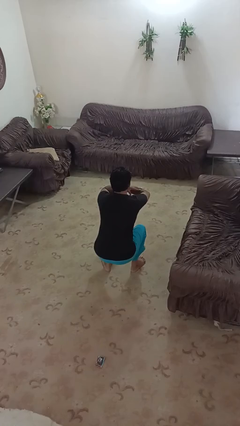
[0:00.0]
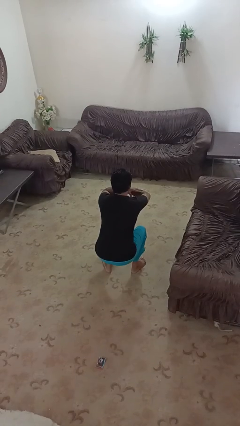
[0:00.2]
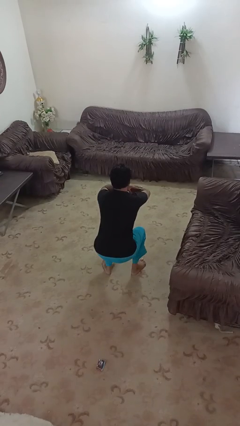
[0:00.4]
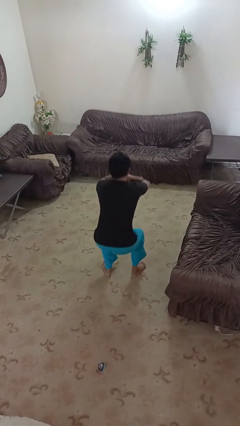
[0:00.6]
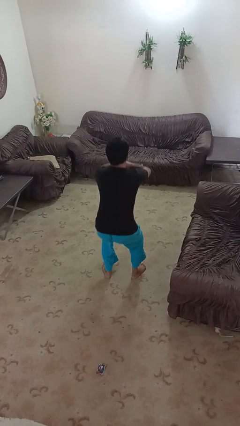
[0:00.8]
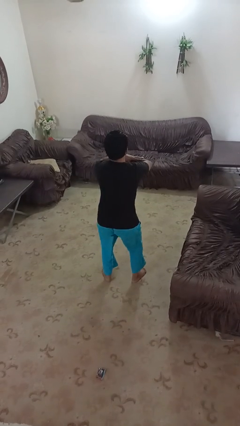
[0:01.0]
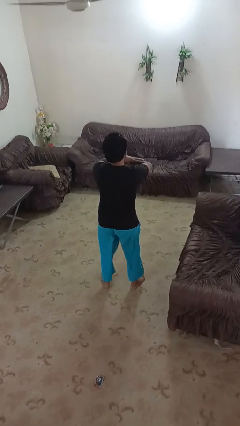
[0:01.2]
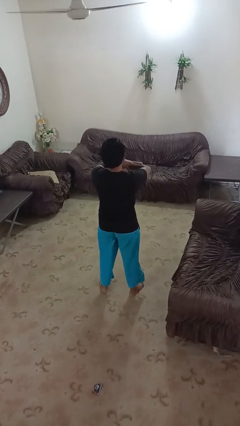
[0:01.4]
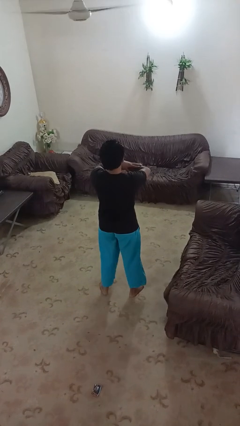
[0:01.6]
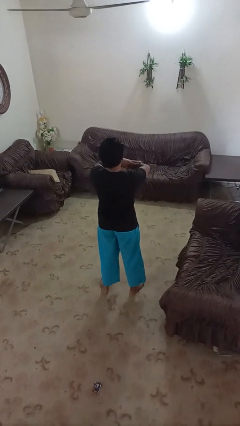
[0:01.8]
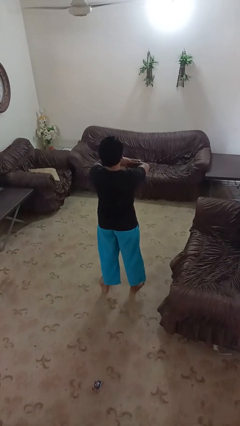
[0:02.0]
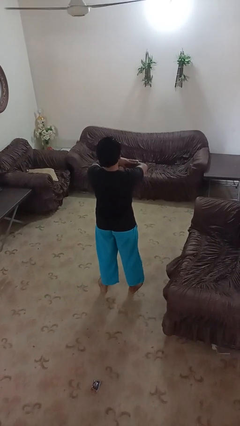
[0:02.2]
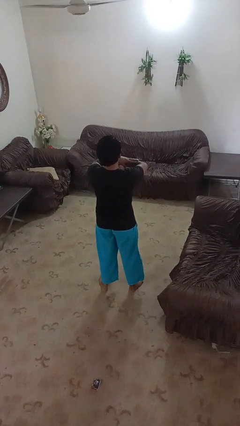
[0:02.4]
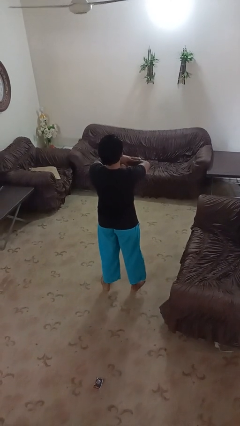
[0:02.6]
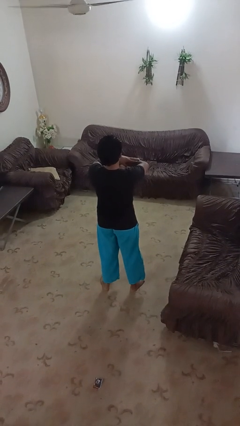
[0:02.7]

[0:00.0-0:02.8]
person stands up

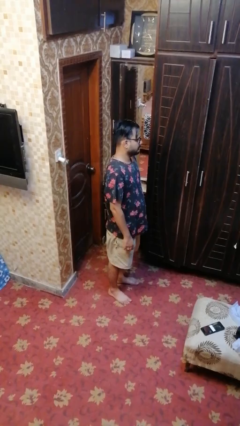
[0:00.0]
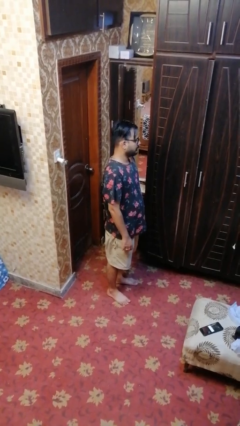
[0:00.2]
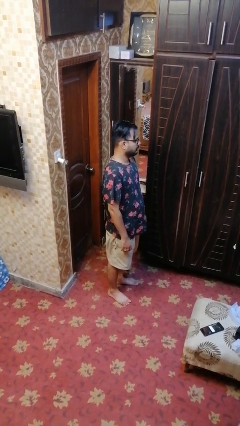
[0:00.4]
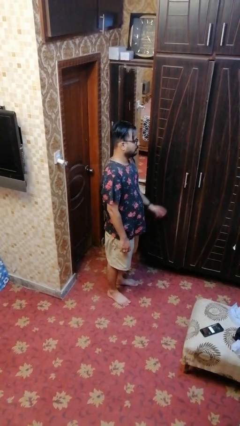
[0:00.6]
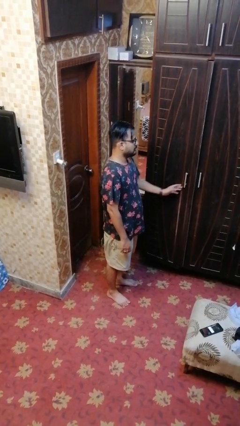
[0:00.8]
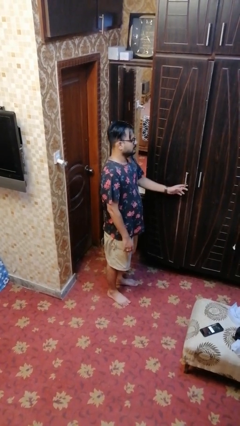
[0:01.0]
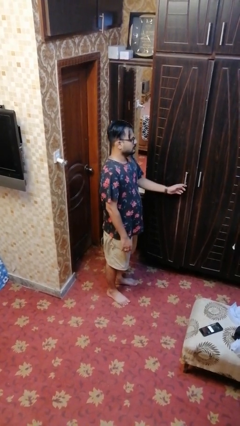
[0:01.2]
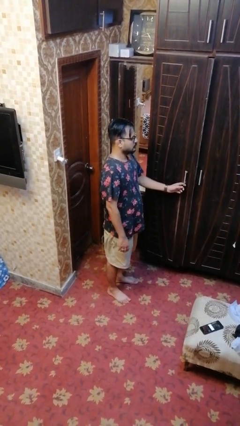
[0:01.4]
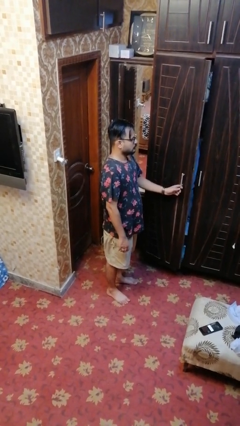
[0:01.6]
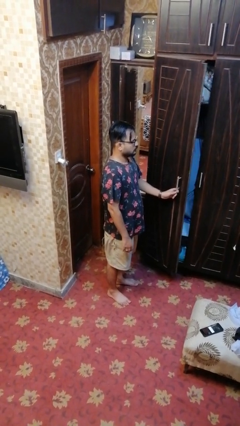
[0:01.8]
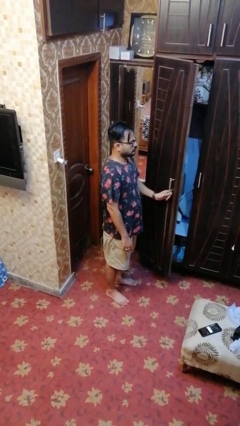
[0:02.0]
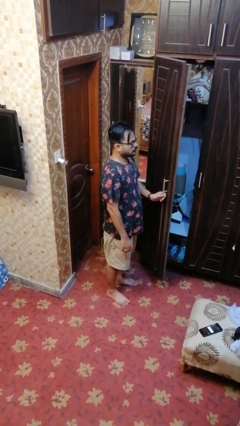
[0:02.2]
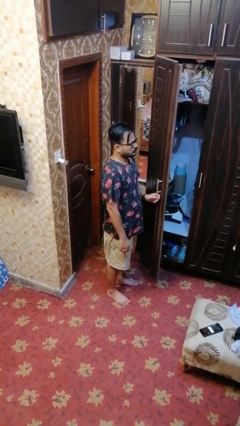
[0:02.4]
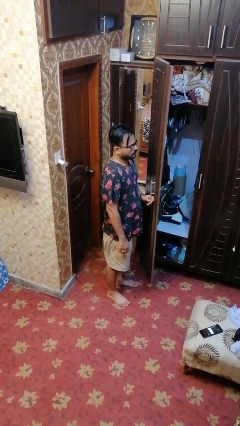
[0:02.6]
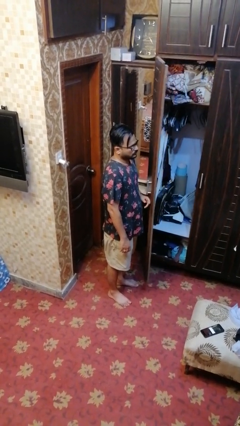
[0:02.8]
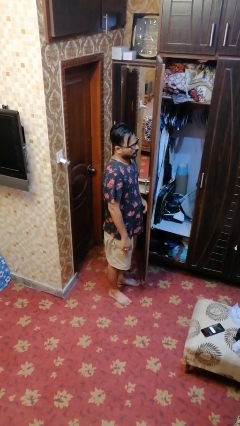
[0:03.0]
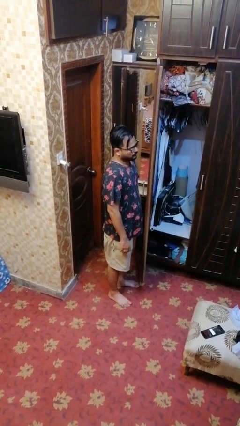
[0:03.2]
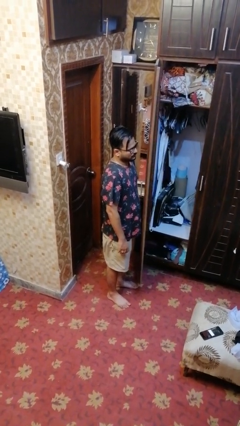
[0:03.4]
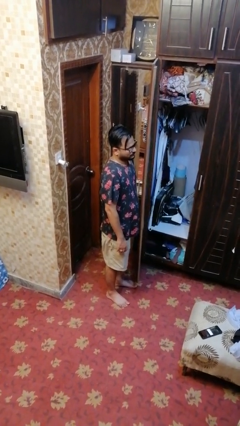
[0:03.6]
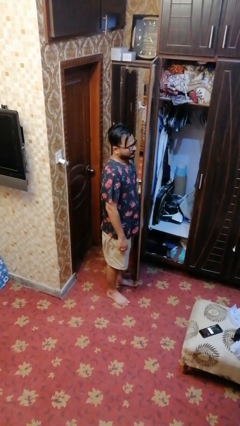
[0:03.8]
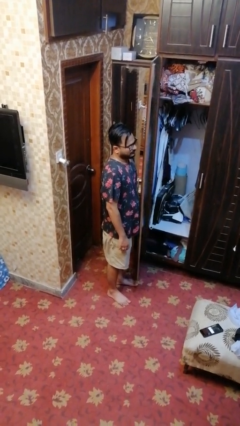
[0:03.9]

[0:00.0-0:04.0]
person opens closet door

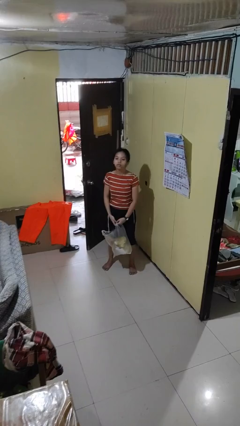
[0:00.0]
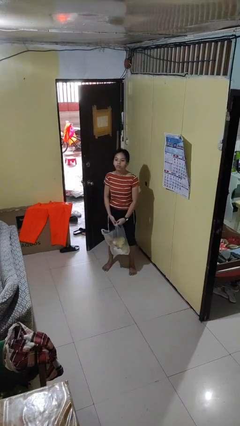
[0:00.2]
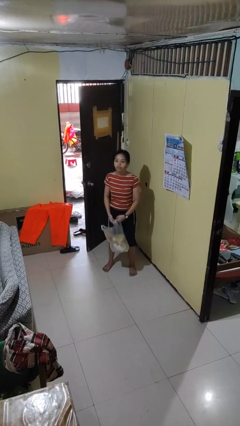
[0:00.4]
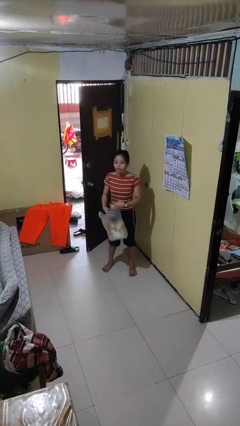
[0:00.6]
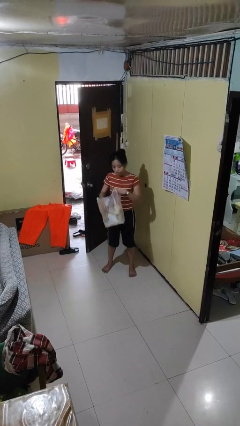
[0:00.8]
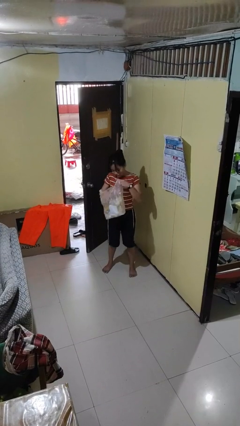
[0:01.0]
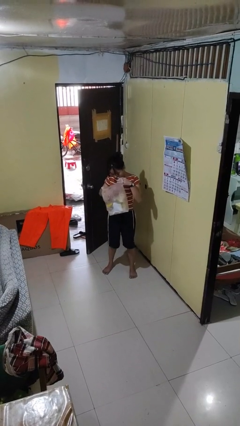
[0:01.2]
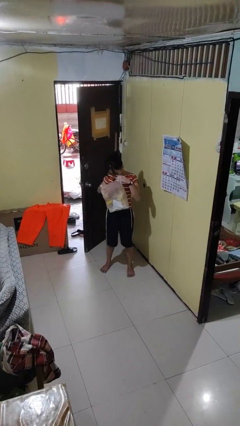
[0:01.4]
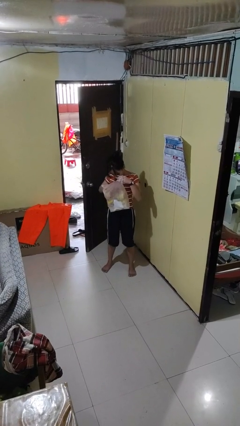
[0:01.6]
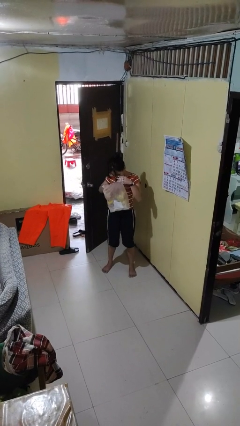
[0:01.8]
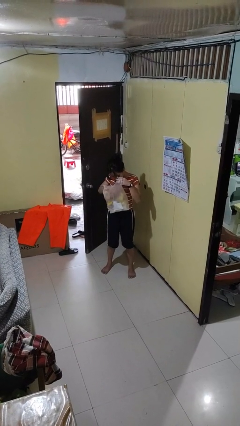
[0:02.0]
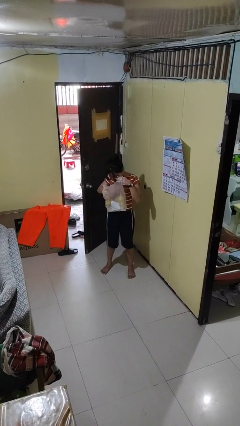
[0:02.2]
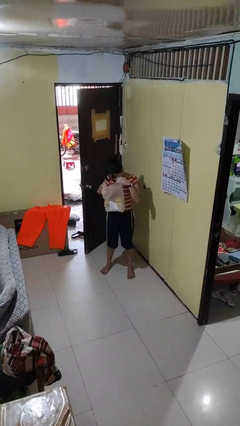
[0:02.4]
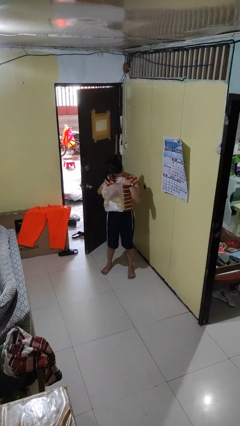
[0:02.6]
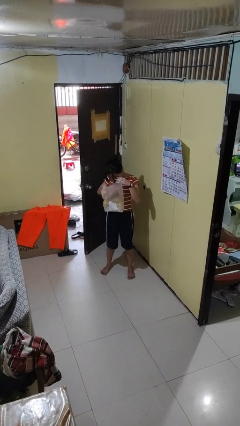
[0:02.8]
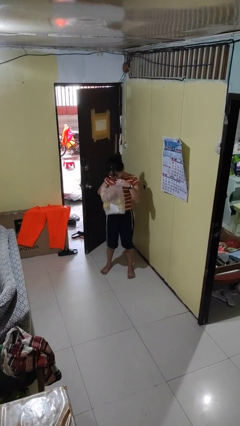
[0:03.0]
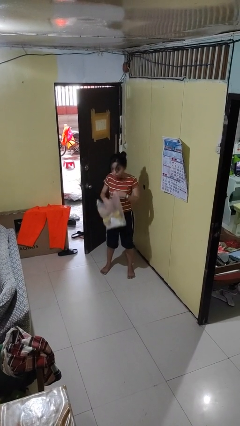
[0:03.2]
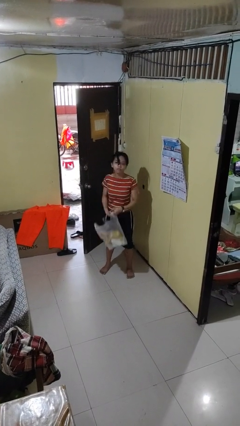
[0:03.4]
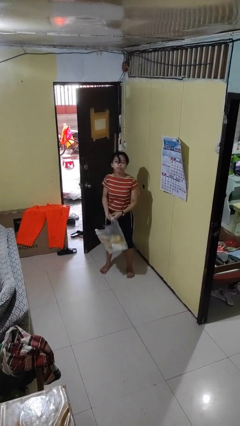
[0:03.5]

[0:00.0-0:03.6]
person searches in bag

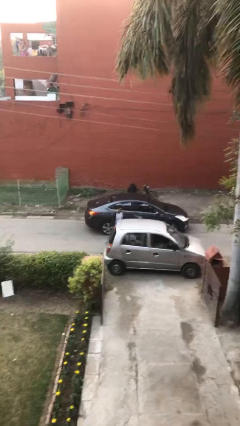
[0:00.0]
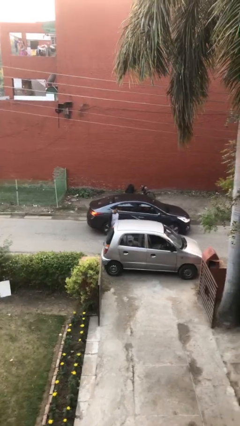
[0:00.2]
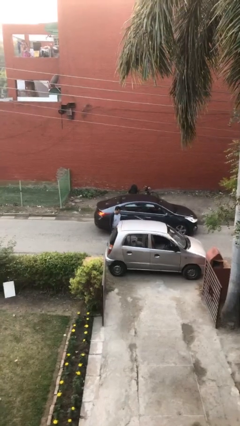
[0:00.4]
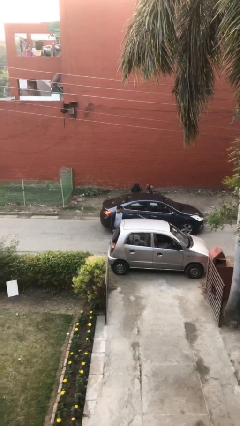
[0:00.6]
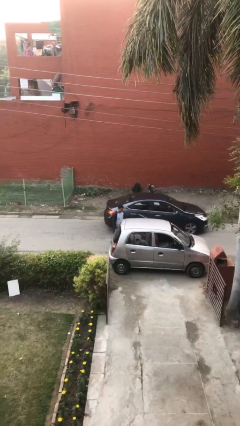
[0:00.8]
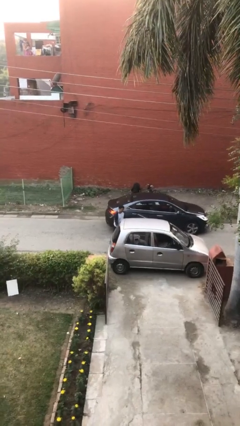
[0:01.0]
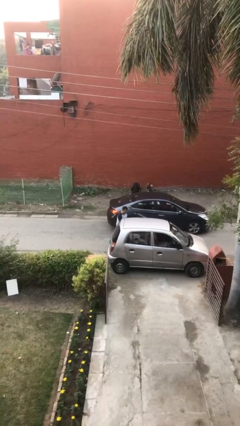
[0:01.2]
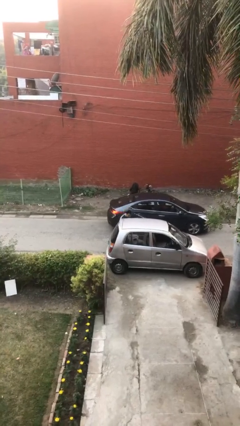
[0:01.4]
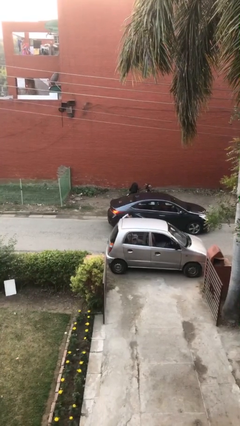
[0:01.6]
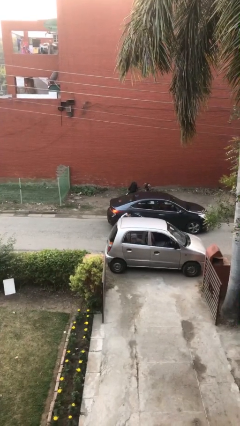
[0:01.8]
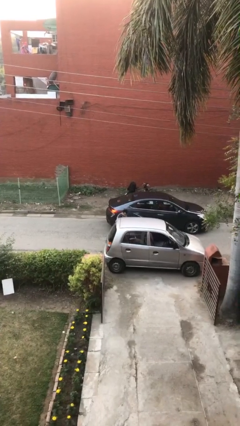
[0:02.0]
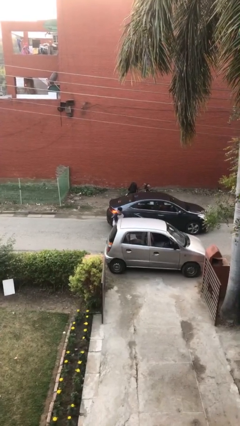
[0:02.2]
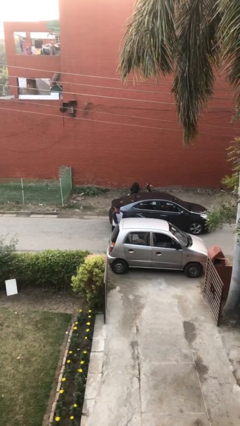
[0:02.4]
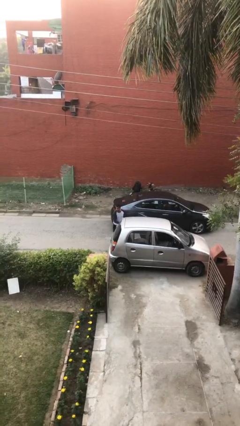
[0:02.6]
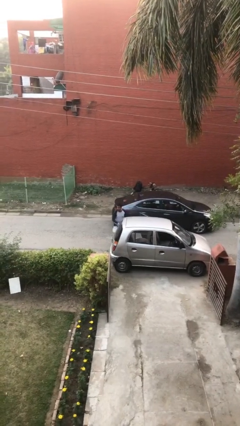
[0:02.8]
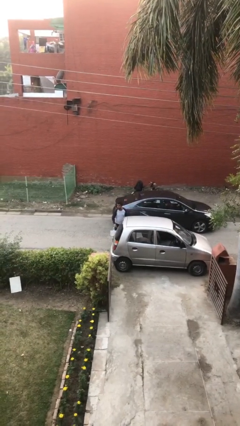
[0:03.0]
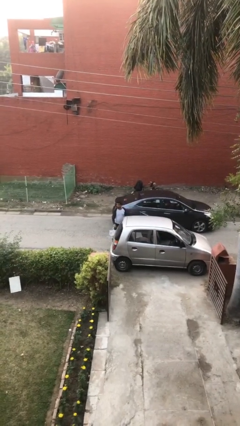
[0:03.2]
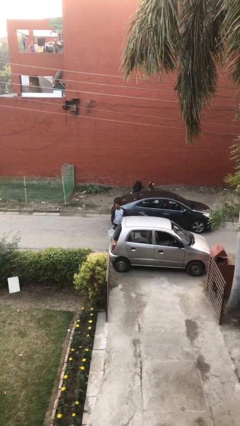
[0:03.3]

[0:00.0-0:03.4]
person unloads car

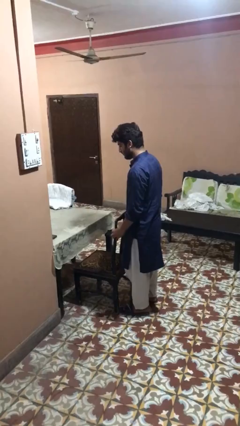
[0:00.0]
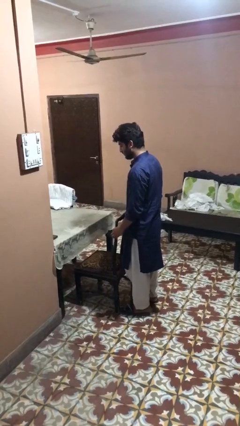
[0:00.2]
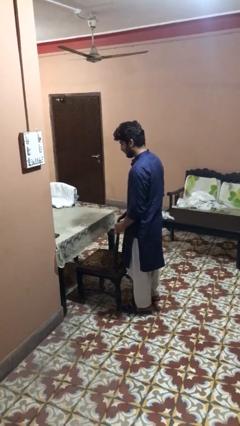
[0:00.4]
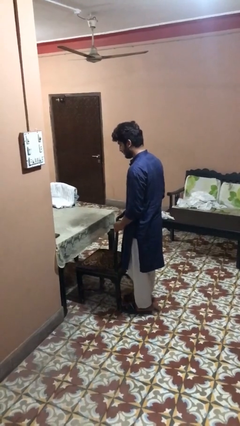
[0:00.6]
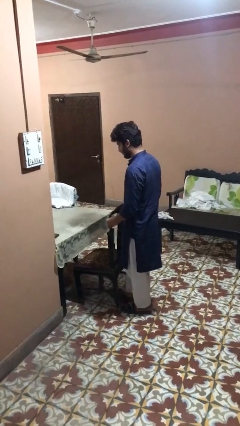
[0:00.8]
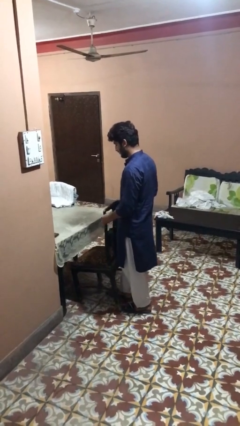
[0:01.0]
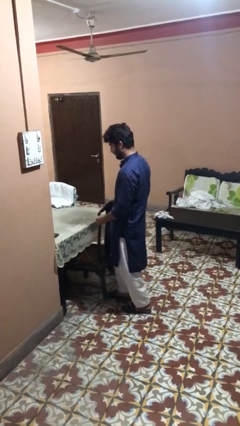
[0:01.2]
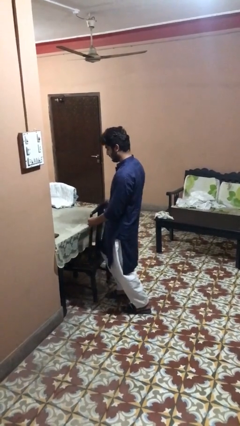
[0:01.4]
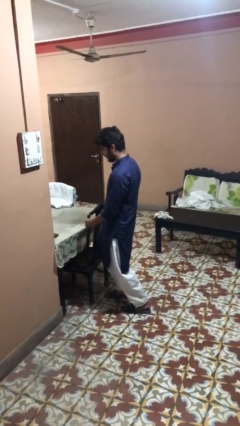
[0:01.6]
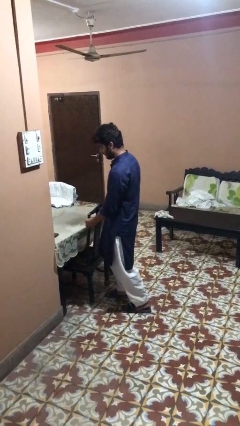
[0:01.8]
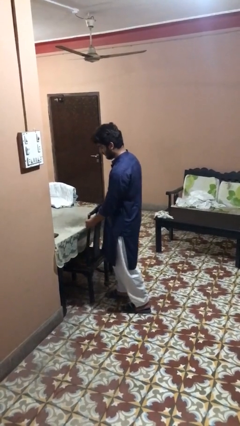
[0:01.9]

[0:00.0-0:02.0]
person pushes in chair

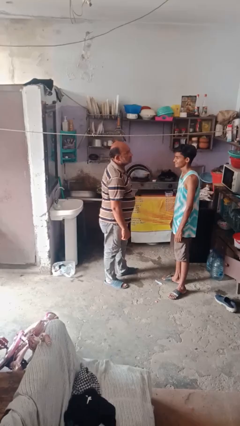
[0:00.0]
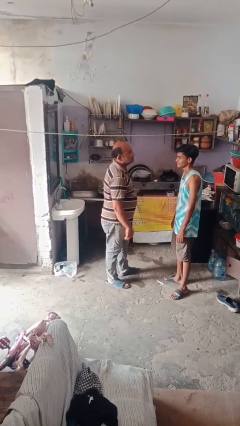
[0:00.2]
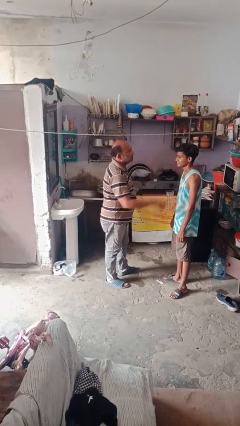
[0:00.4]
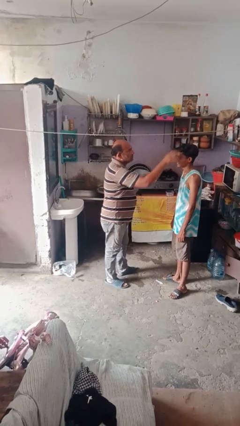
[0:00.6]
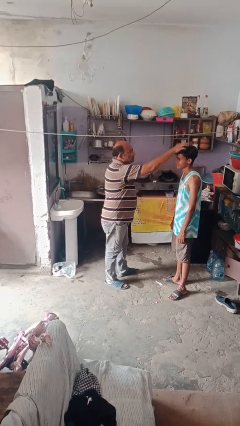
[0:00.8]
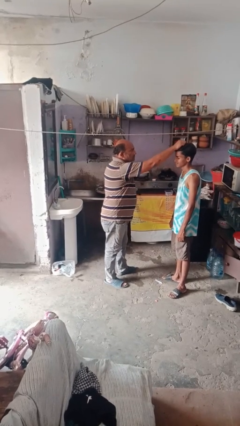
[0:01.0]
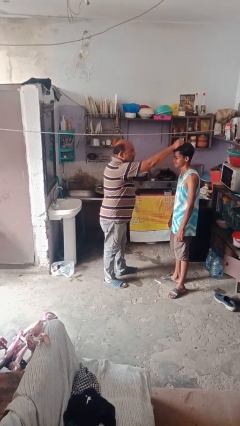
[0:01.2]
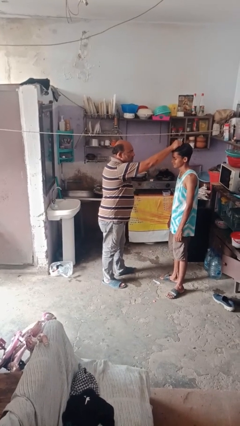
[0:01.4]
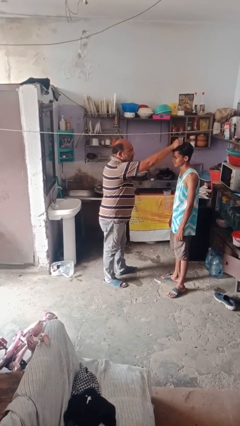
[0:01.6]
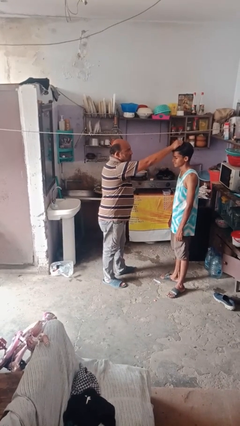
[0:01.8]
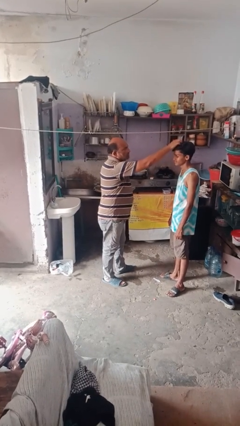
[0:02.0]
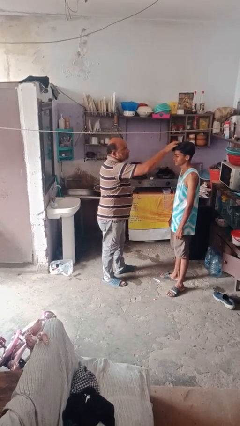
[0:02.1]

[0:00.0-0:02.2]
person grabs person by hair
